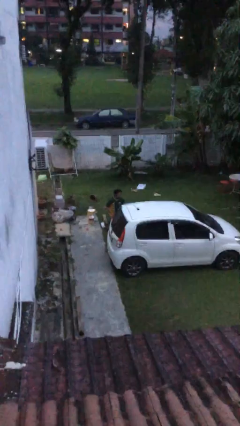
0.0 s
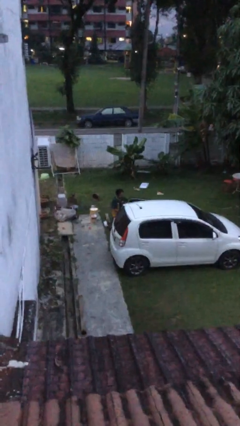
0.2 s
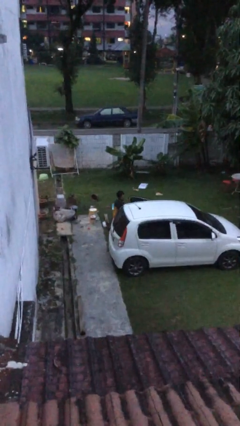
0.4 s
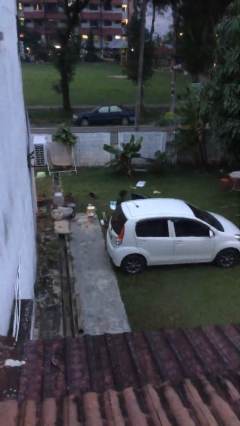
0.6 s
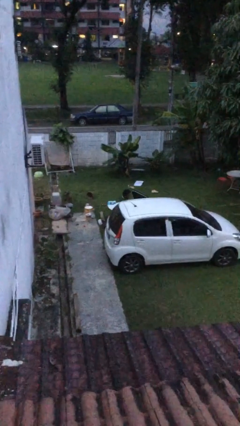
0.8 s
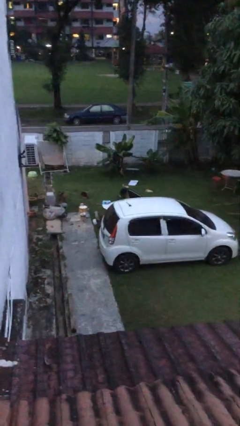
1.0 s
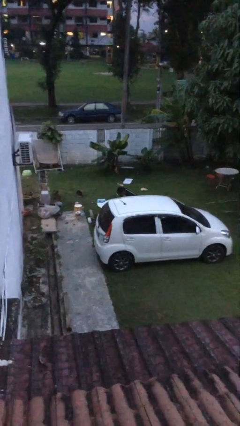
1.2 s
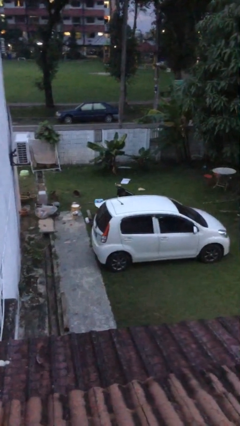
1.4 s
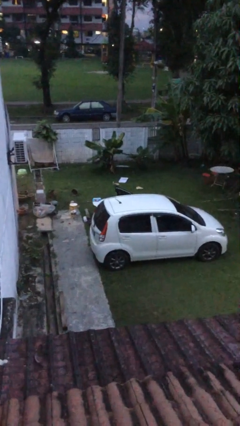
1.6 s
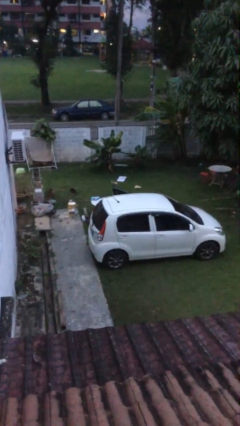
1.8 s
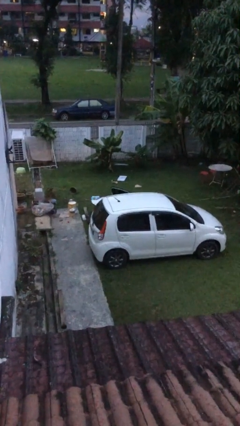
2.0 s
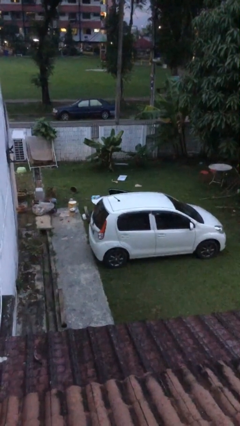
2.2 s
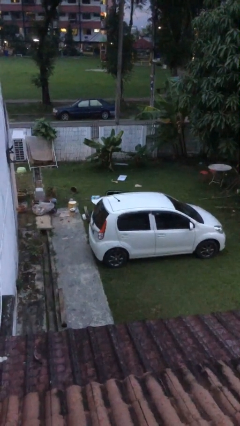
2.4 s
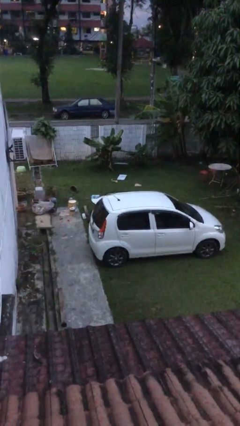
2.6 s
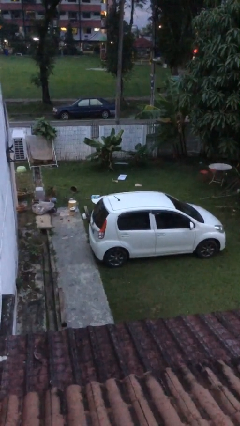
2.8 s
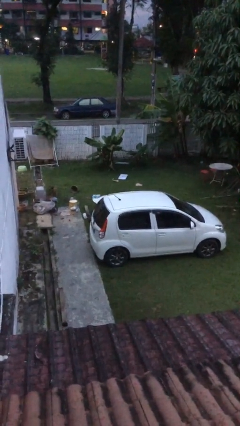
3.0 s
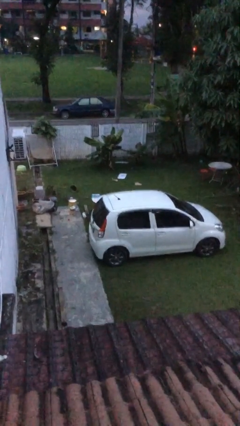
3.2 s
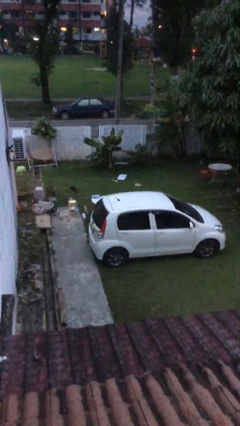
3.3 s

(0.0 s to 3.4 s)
car picks up person

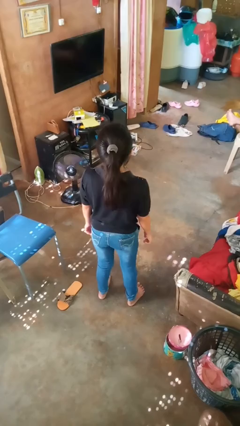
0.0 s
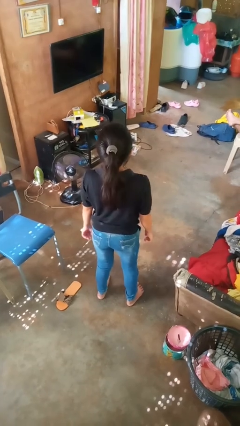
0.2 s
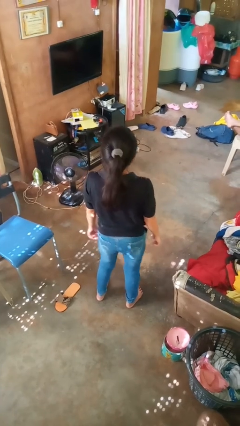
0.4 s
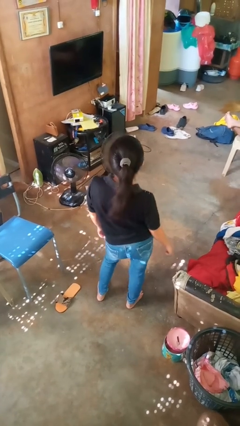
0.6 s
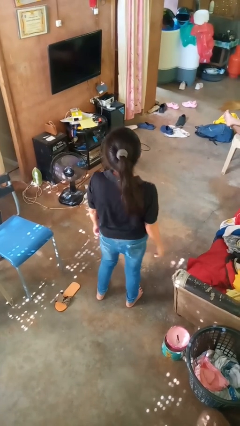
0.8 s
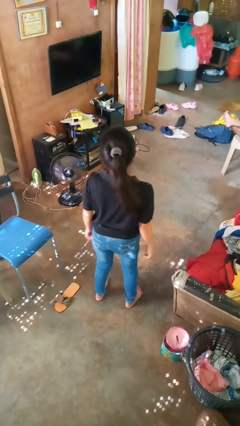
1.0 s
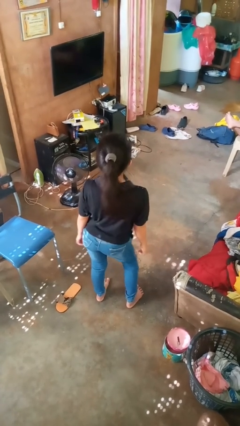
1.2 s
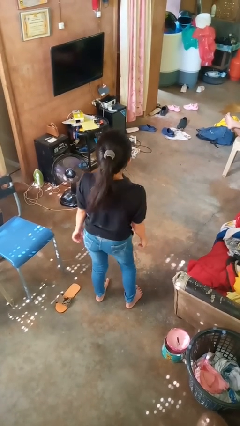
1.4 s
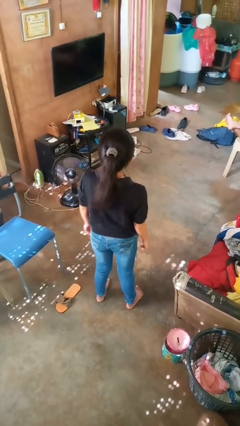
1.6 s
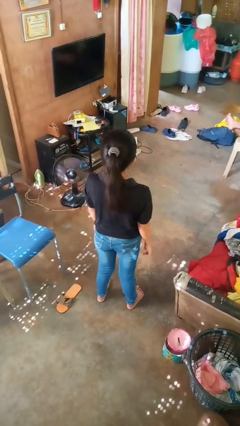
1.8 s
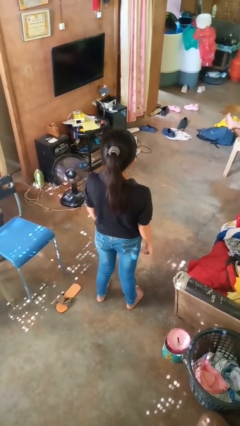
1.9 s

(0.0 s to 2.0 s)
person wiggles hips

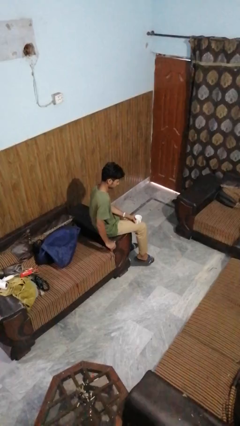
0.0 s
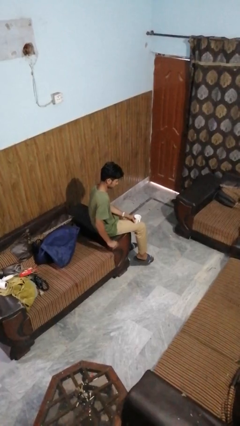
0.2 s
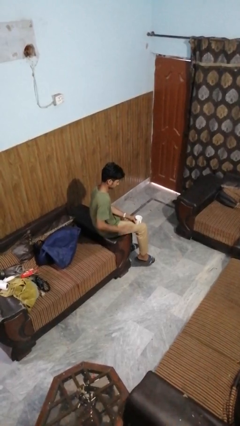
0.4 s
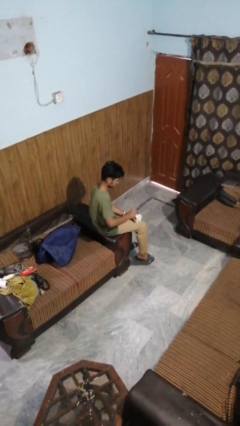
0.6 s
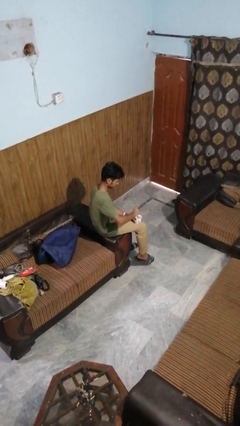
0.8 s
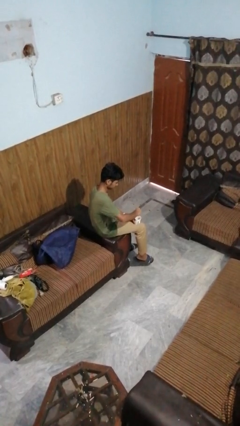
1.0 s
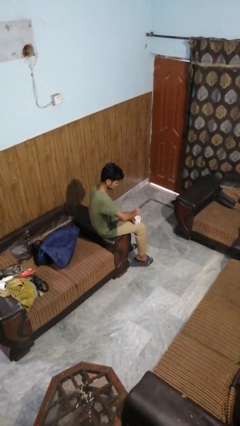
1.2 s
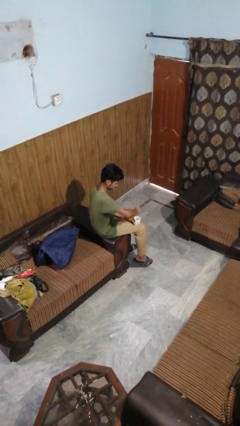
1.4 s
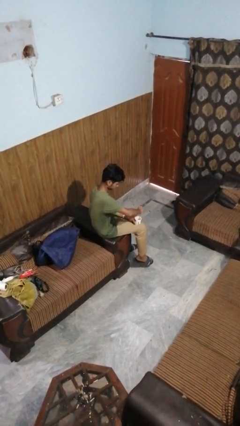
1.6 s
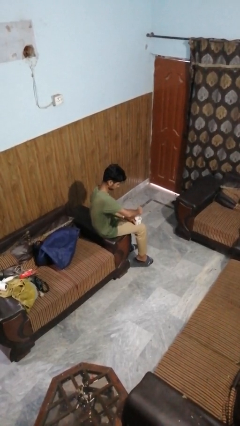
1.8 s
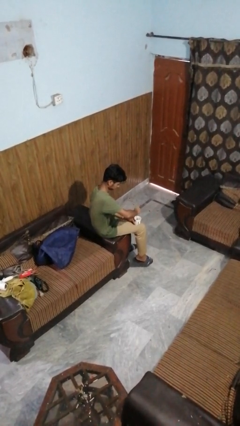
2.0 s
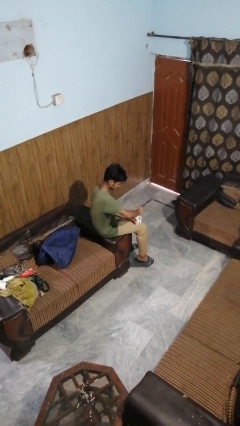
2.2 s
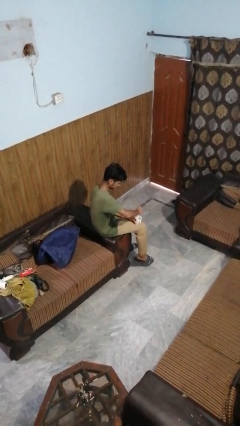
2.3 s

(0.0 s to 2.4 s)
person stirs mug

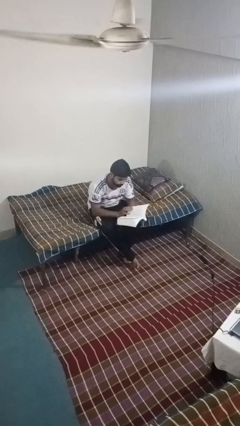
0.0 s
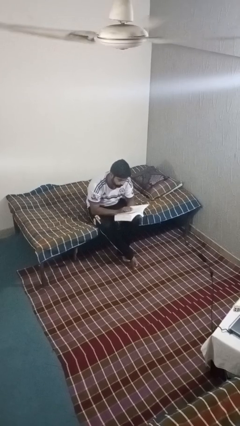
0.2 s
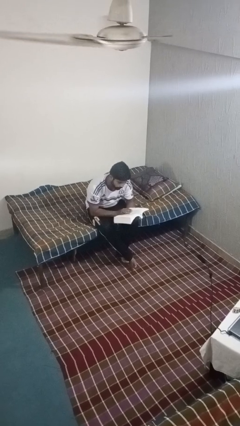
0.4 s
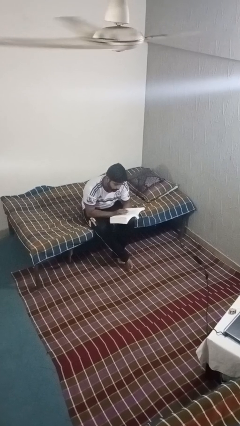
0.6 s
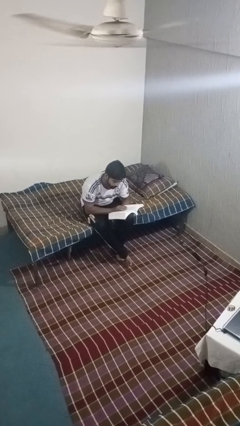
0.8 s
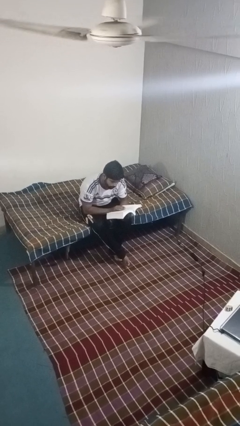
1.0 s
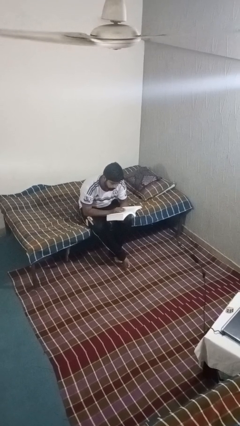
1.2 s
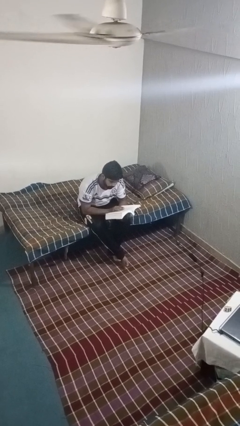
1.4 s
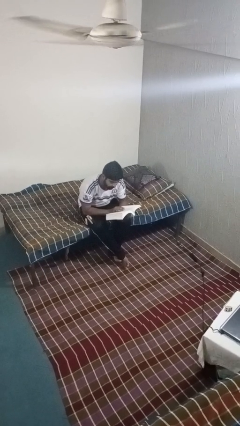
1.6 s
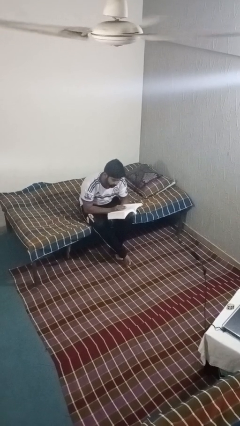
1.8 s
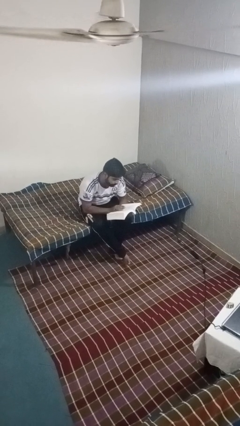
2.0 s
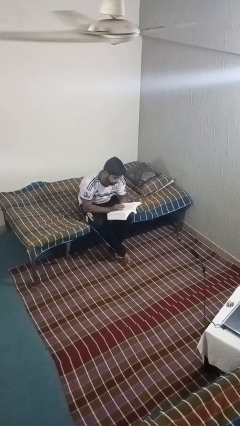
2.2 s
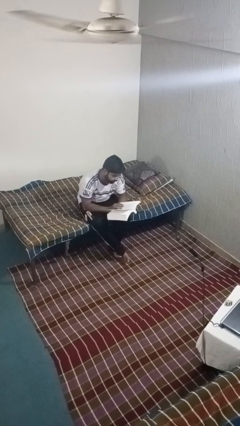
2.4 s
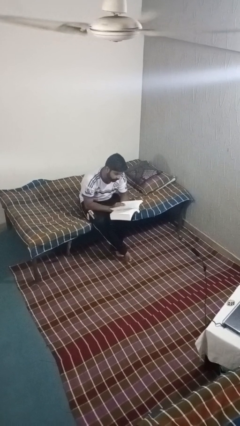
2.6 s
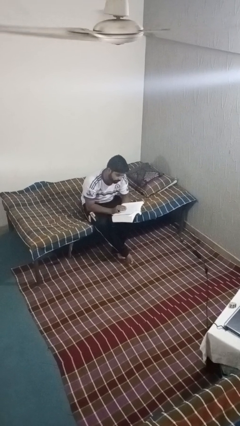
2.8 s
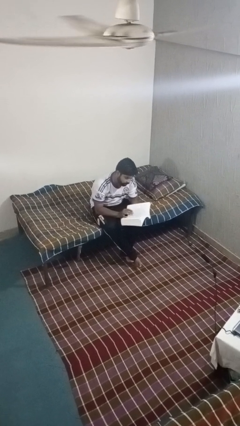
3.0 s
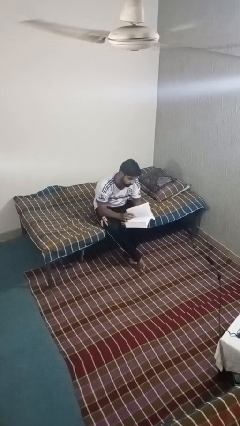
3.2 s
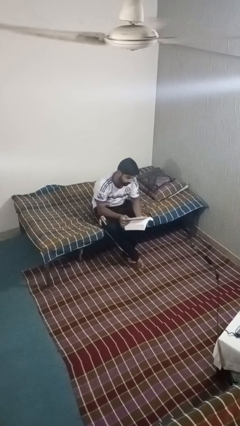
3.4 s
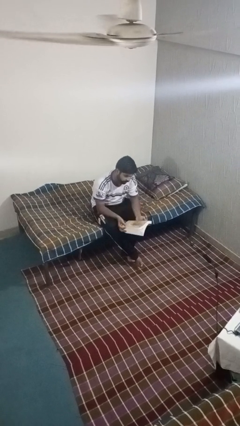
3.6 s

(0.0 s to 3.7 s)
person reads book

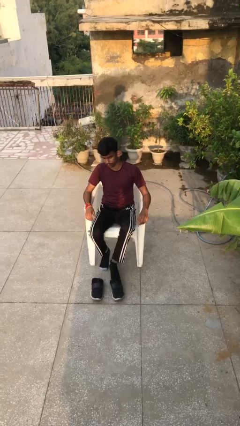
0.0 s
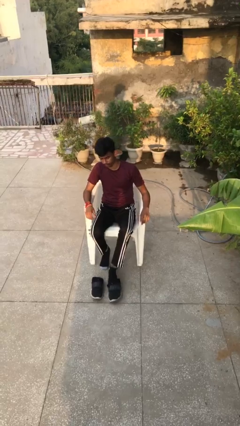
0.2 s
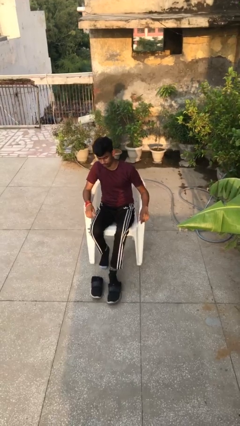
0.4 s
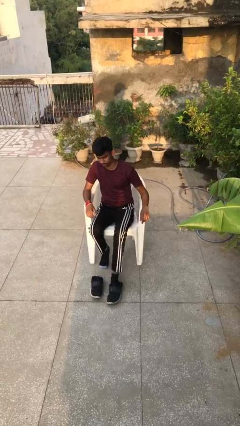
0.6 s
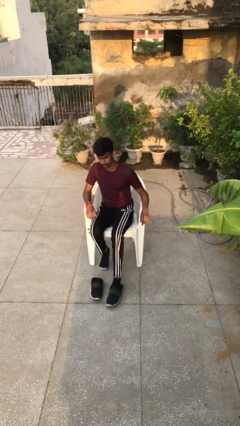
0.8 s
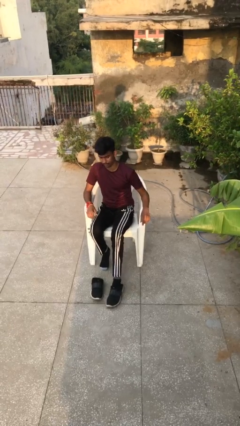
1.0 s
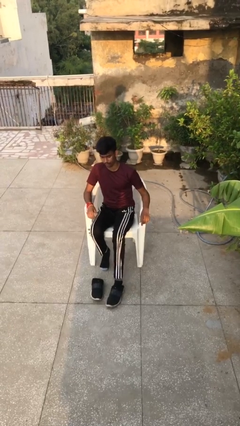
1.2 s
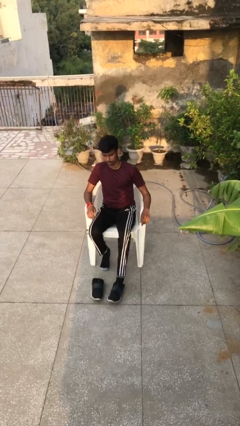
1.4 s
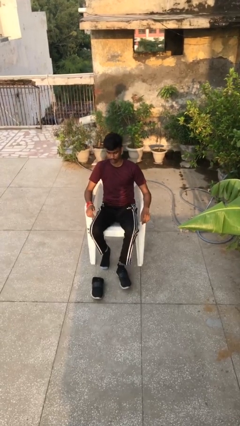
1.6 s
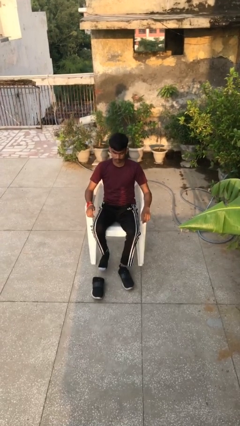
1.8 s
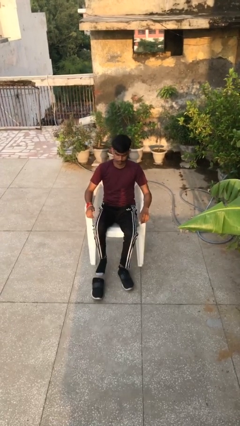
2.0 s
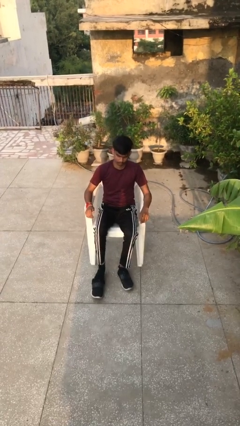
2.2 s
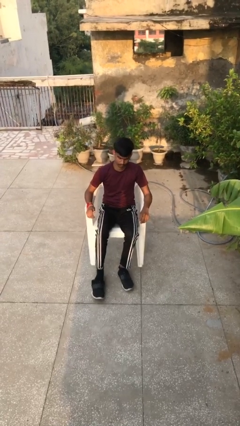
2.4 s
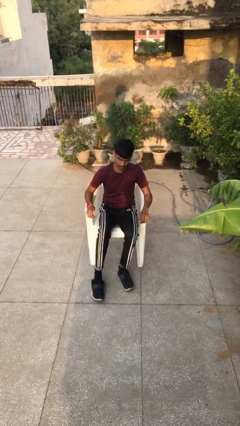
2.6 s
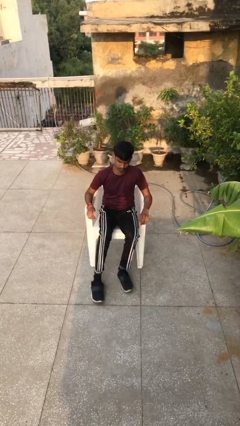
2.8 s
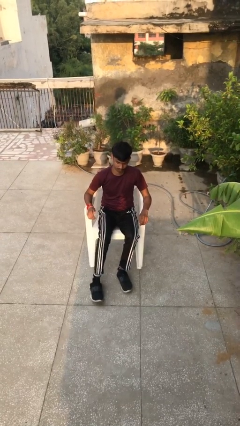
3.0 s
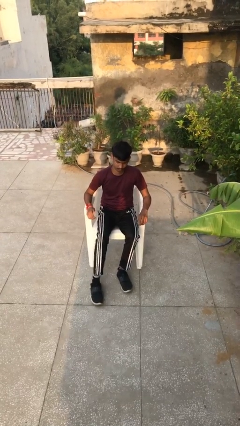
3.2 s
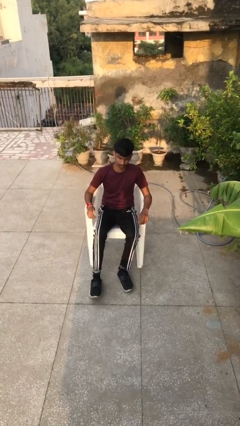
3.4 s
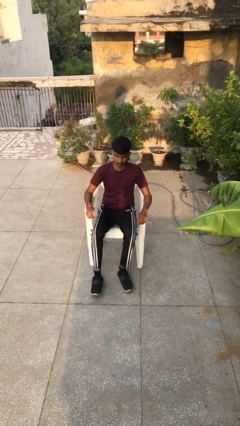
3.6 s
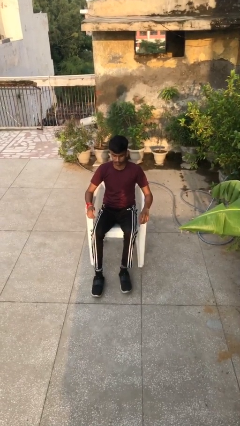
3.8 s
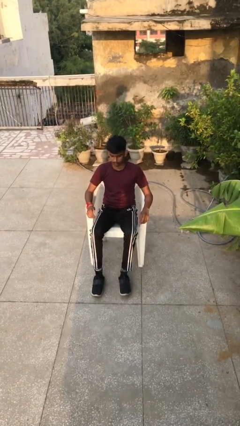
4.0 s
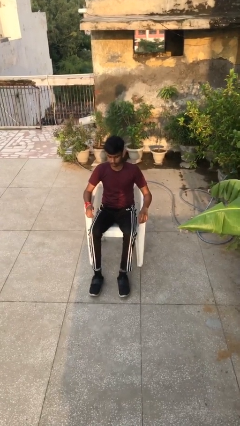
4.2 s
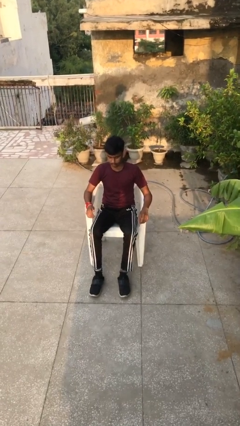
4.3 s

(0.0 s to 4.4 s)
person puts on shoes

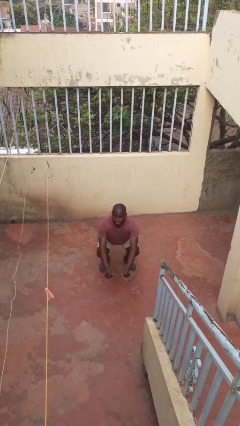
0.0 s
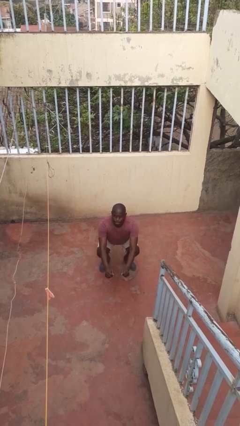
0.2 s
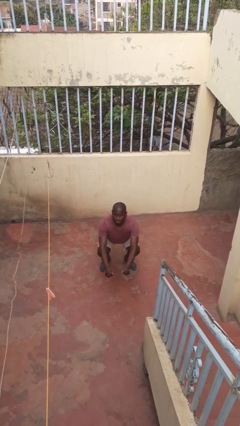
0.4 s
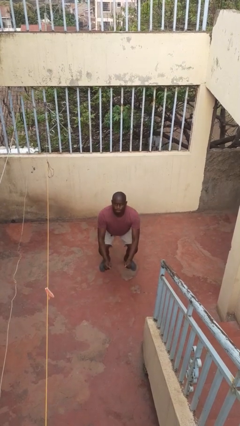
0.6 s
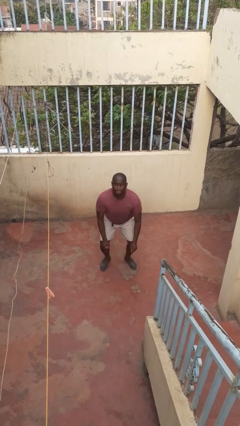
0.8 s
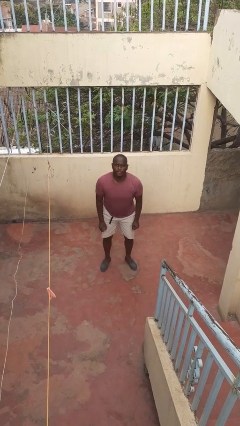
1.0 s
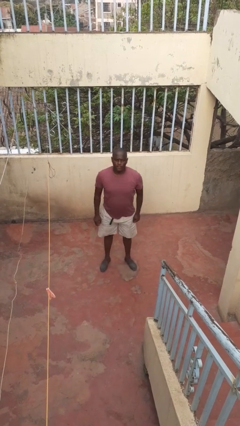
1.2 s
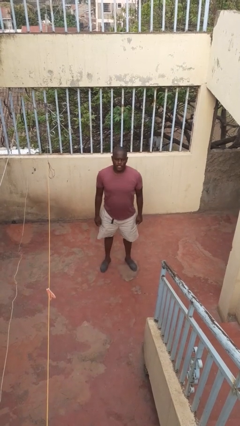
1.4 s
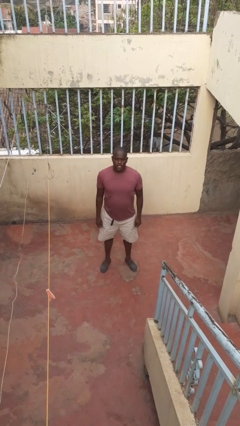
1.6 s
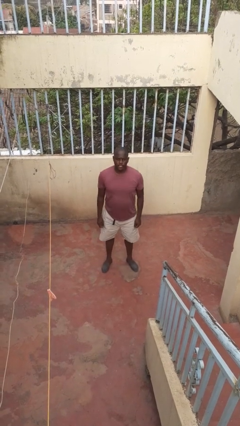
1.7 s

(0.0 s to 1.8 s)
person stands up
